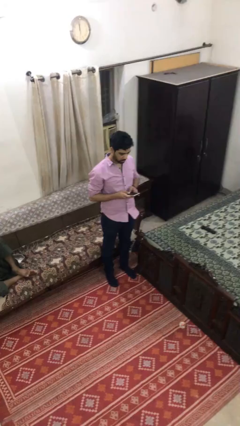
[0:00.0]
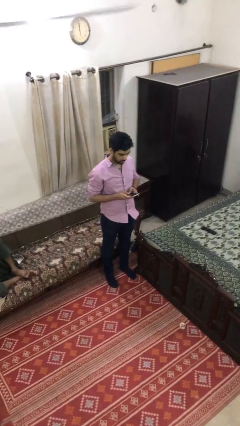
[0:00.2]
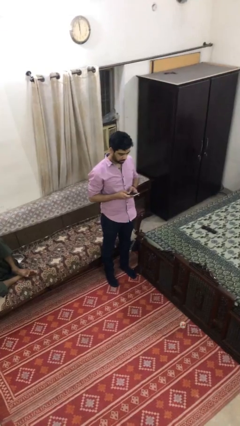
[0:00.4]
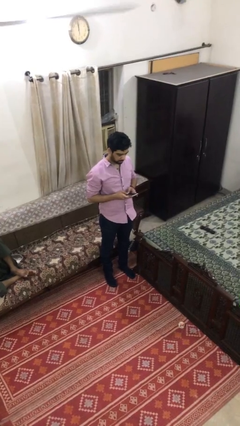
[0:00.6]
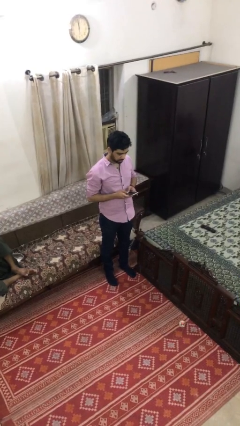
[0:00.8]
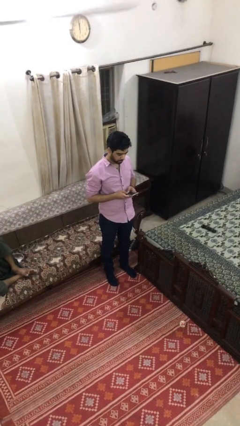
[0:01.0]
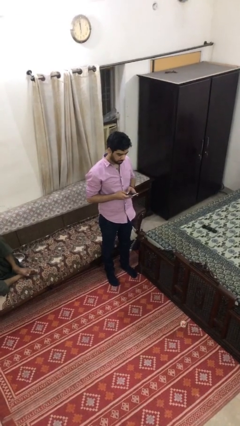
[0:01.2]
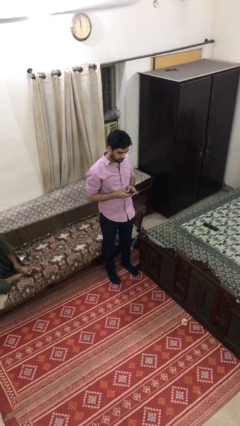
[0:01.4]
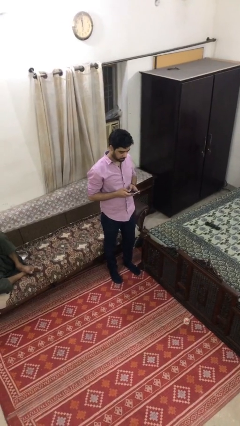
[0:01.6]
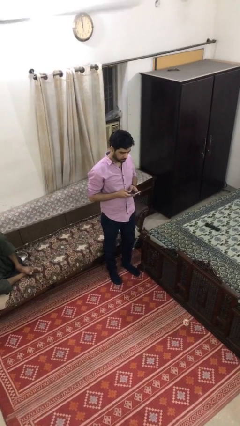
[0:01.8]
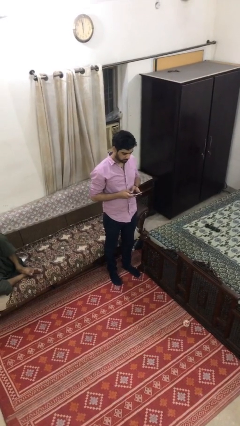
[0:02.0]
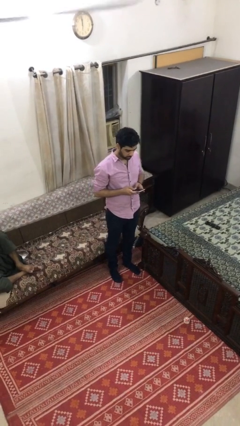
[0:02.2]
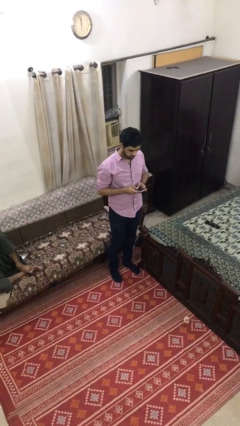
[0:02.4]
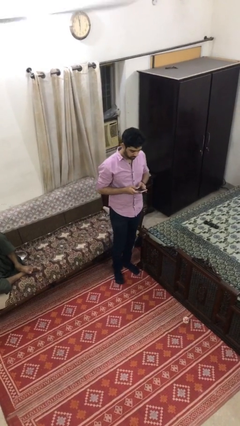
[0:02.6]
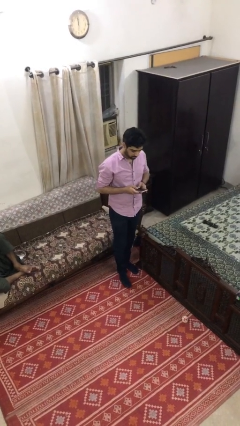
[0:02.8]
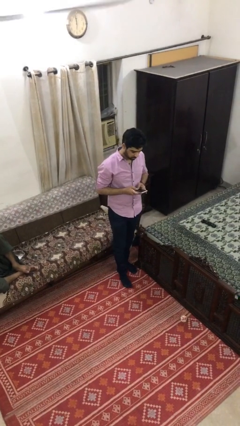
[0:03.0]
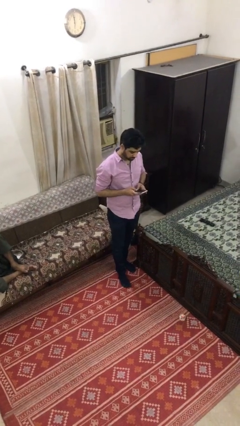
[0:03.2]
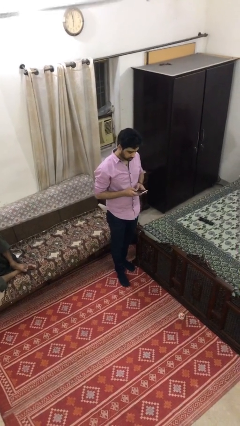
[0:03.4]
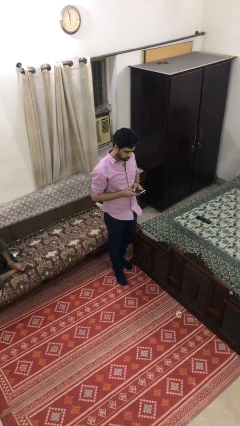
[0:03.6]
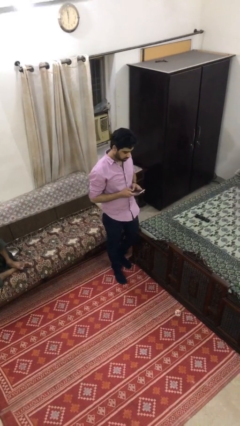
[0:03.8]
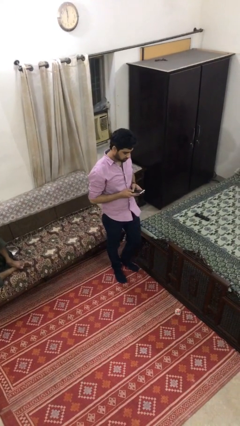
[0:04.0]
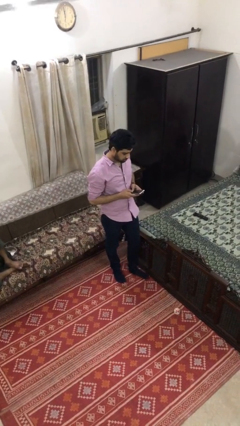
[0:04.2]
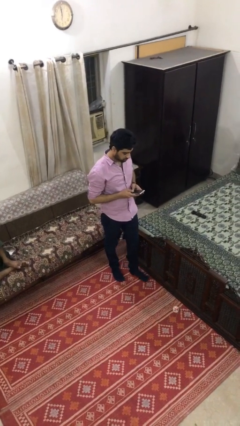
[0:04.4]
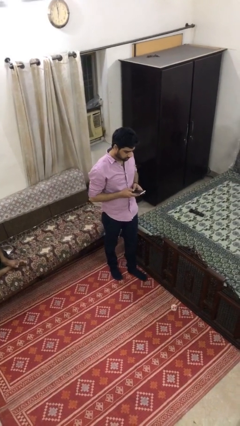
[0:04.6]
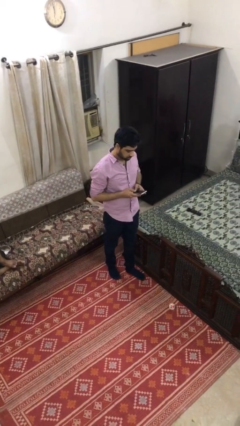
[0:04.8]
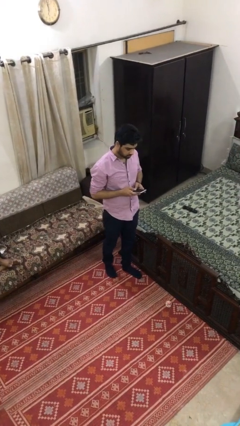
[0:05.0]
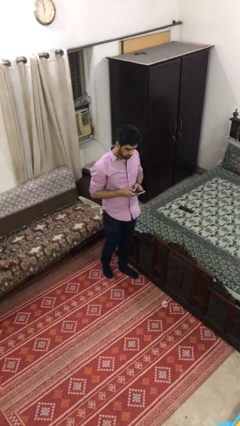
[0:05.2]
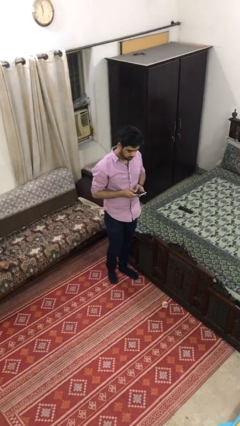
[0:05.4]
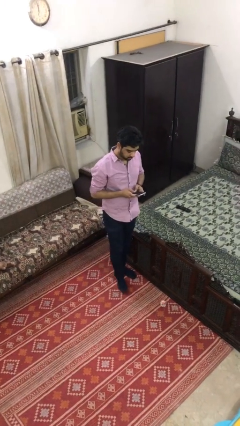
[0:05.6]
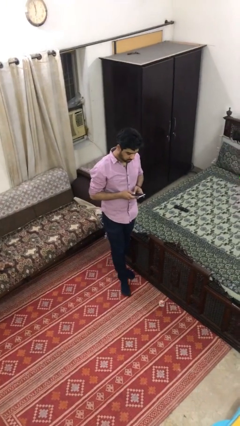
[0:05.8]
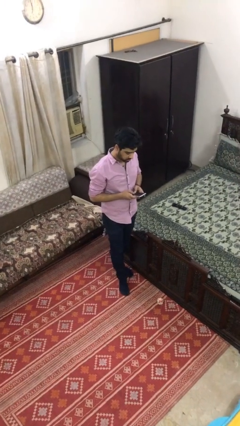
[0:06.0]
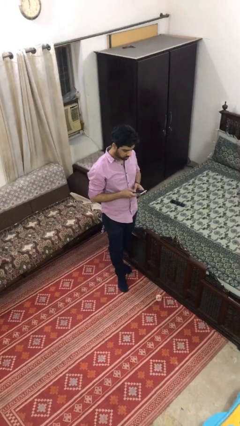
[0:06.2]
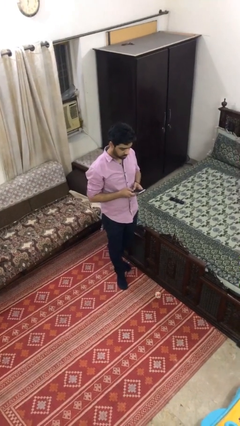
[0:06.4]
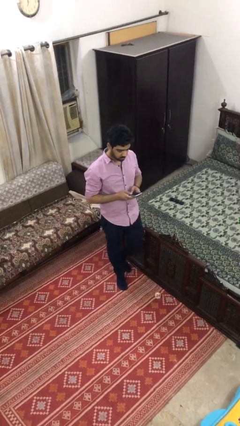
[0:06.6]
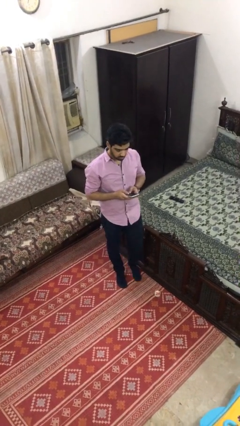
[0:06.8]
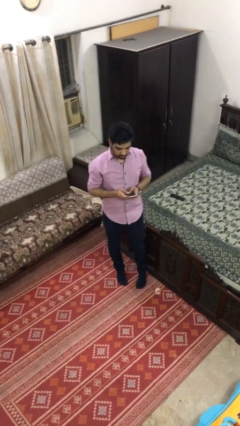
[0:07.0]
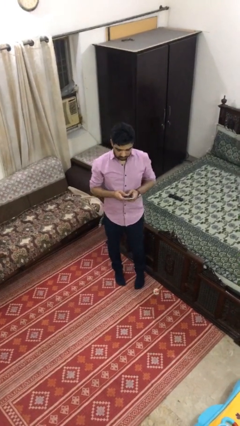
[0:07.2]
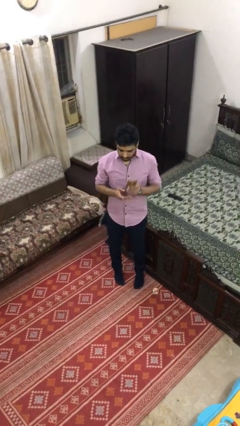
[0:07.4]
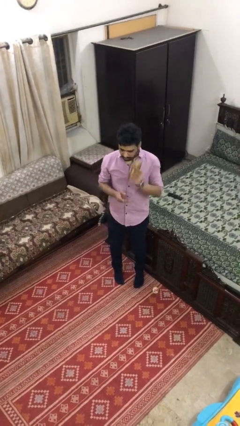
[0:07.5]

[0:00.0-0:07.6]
person texts on phone

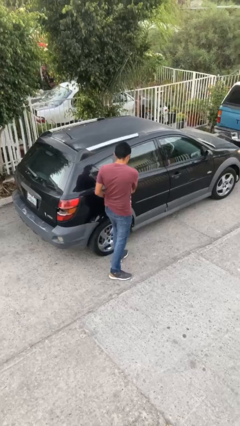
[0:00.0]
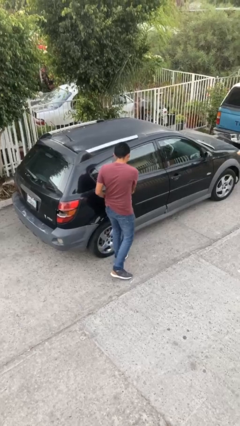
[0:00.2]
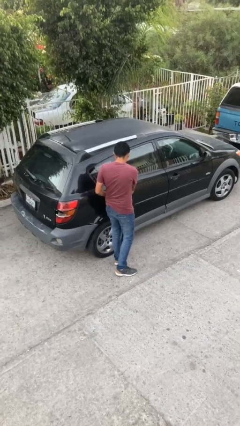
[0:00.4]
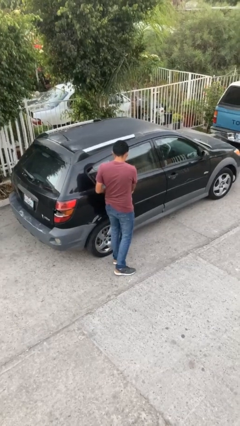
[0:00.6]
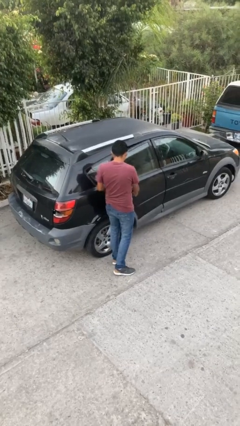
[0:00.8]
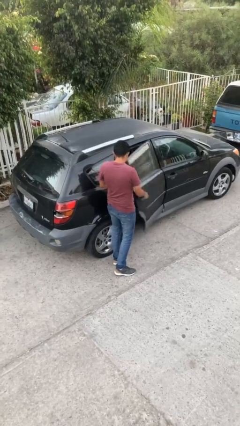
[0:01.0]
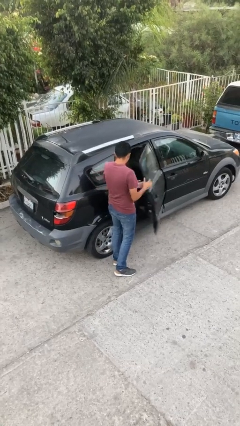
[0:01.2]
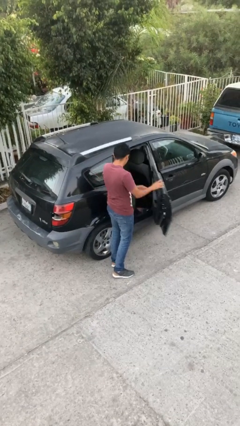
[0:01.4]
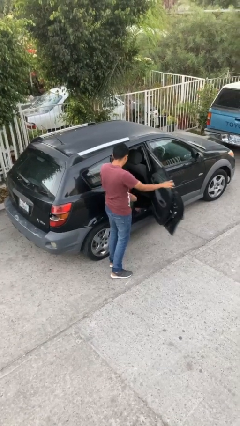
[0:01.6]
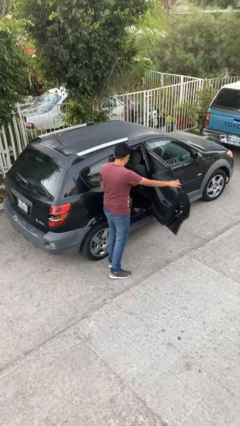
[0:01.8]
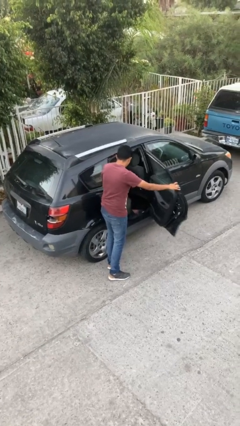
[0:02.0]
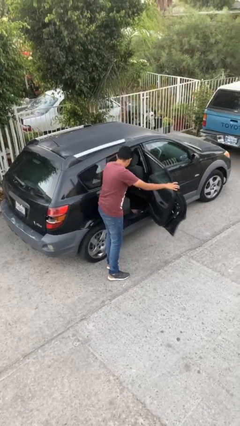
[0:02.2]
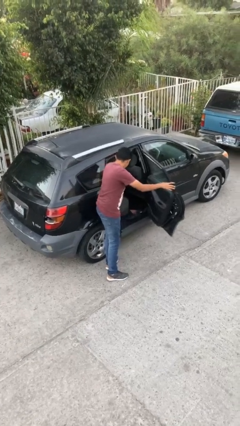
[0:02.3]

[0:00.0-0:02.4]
person opens car door

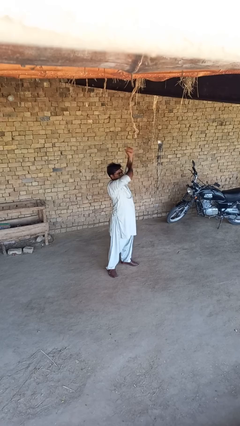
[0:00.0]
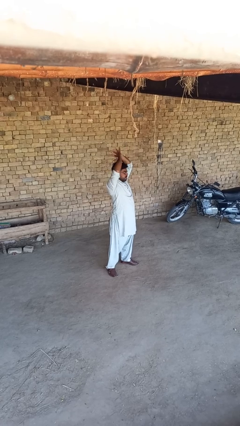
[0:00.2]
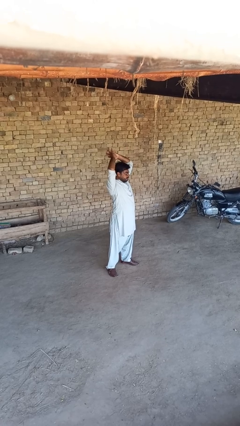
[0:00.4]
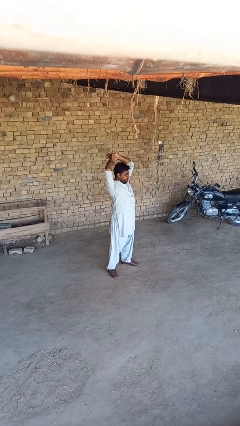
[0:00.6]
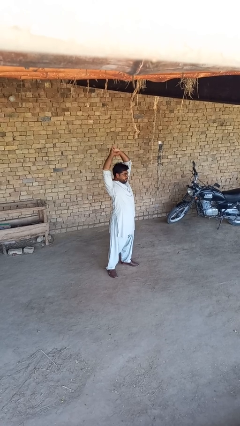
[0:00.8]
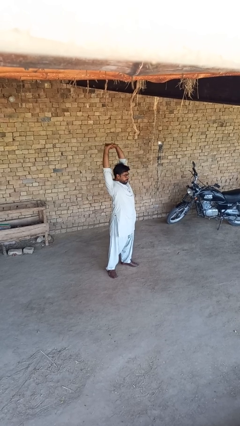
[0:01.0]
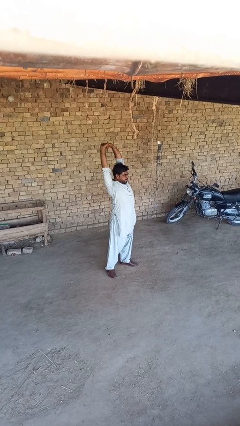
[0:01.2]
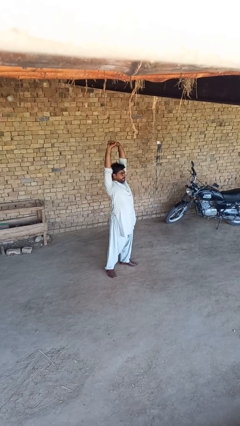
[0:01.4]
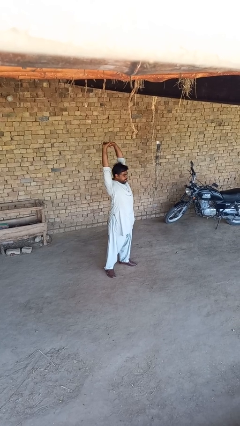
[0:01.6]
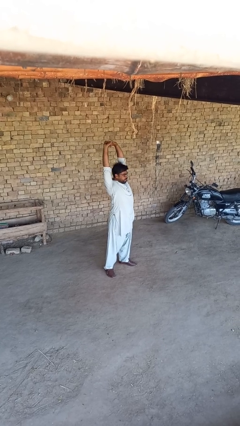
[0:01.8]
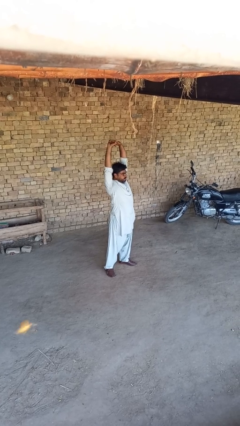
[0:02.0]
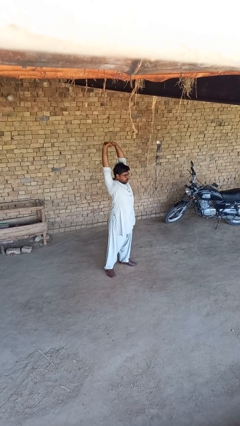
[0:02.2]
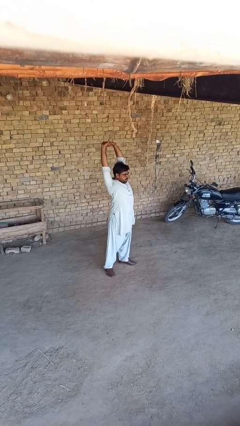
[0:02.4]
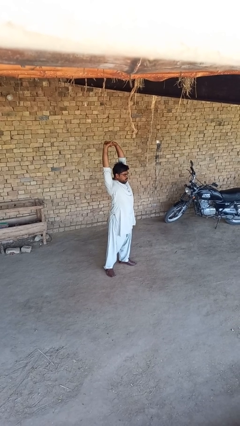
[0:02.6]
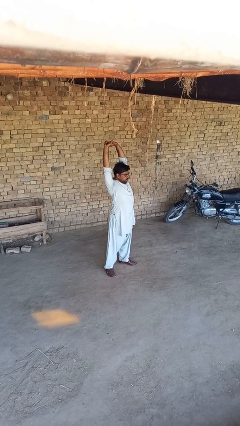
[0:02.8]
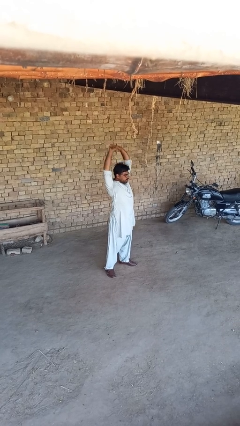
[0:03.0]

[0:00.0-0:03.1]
person stretches arms over head

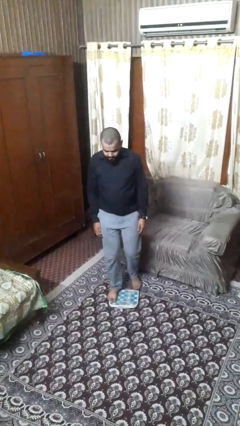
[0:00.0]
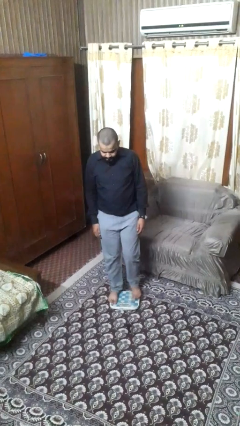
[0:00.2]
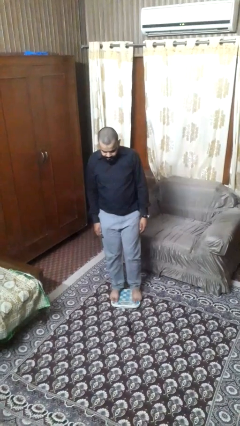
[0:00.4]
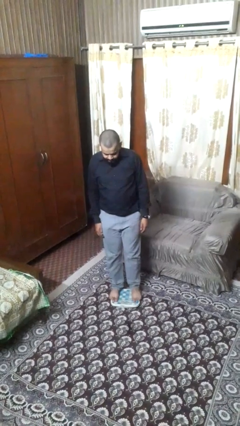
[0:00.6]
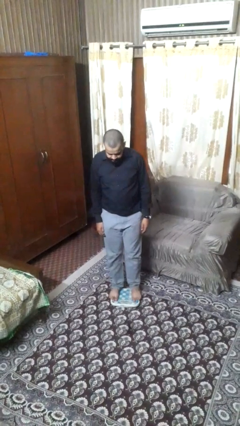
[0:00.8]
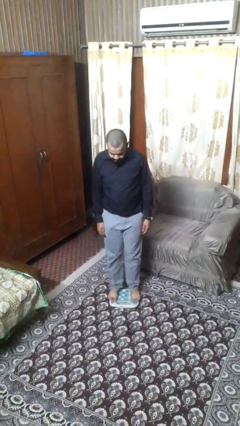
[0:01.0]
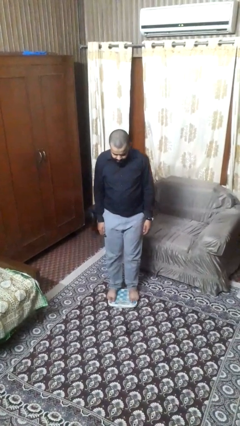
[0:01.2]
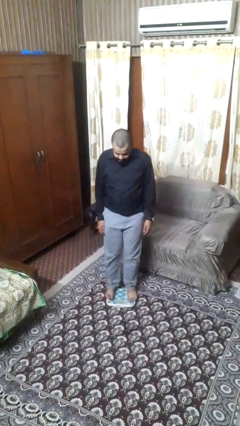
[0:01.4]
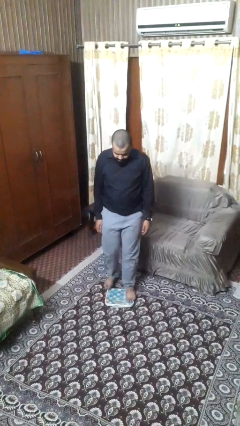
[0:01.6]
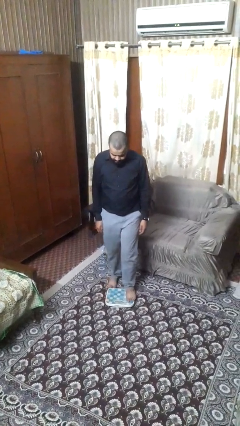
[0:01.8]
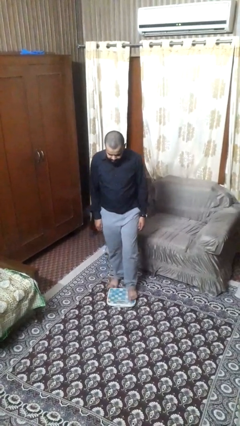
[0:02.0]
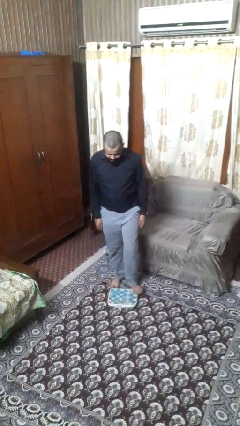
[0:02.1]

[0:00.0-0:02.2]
person uses bodyweight scale

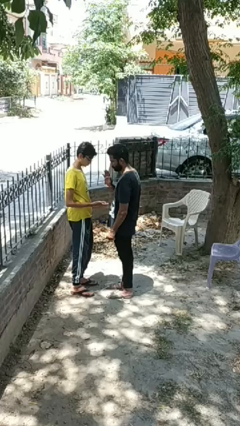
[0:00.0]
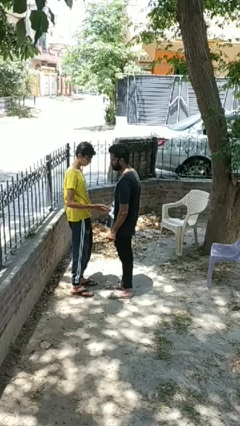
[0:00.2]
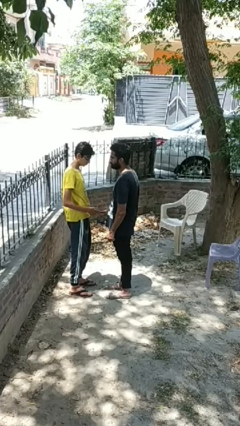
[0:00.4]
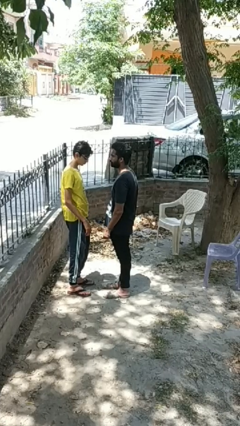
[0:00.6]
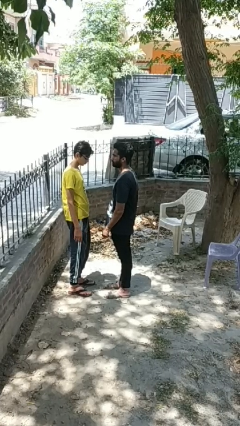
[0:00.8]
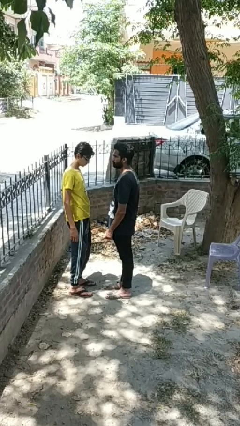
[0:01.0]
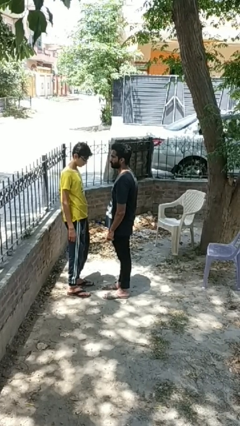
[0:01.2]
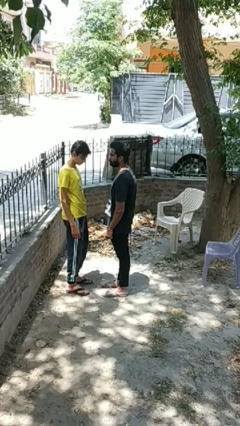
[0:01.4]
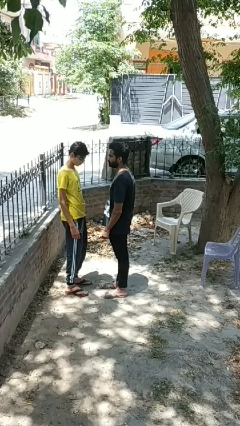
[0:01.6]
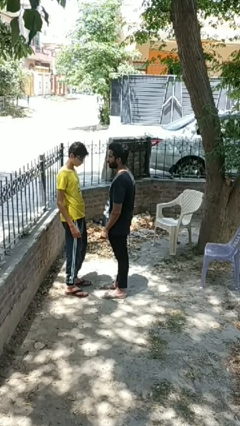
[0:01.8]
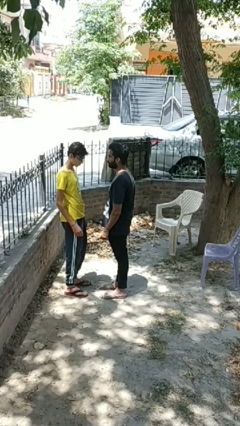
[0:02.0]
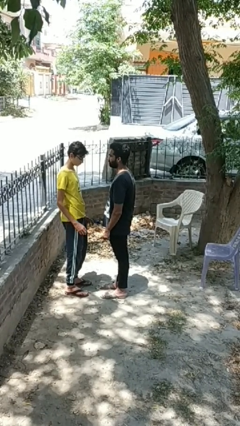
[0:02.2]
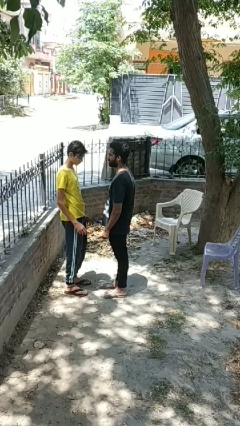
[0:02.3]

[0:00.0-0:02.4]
person highfives hand
